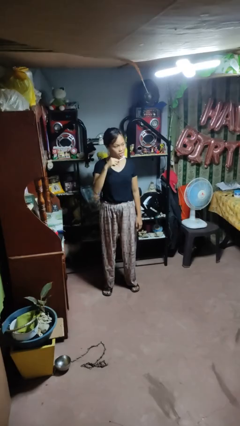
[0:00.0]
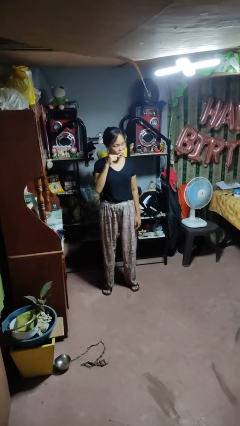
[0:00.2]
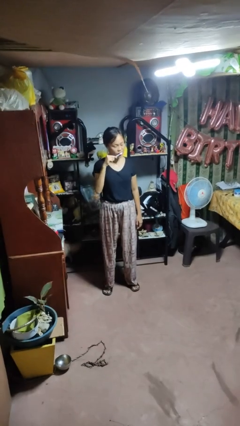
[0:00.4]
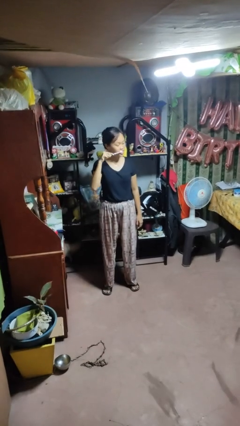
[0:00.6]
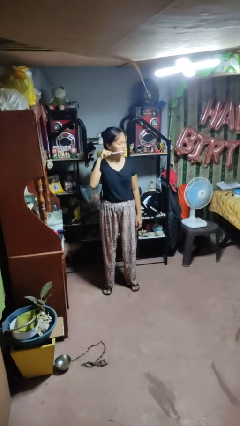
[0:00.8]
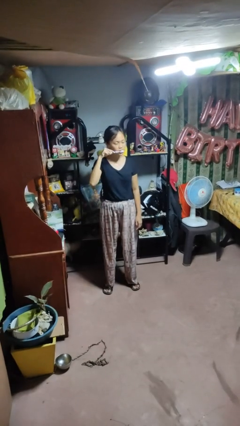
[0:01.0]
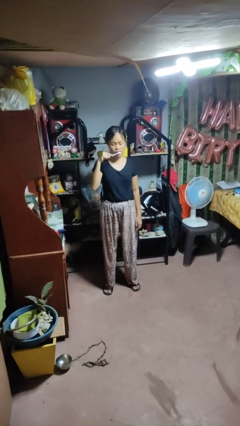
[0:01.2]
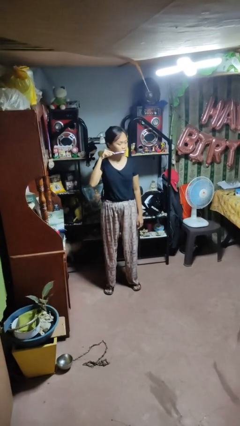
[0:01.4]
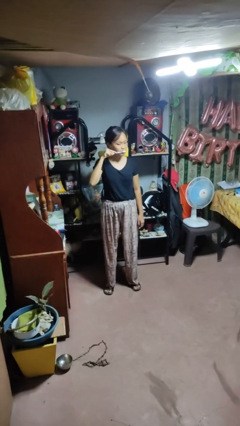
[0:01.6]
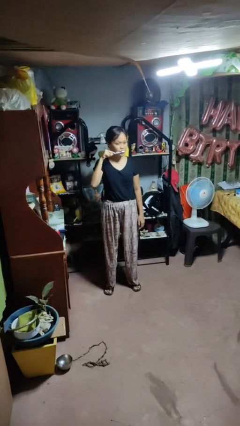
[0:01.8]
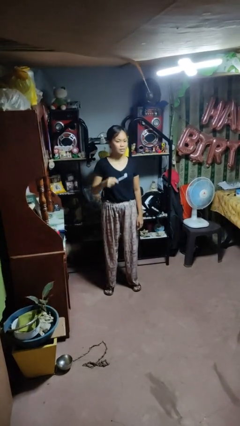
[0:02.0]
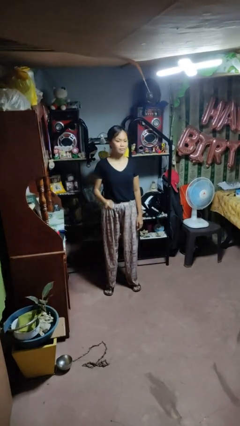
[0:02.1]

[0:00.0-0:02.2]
person brushes teeth

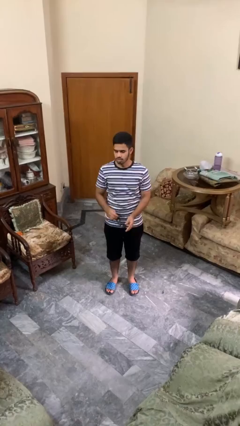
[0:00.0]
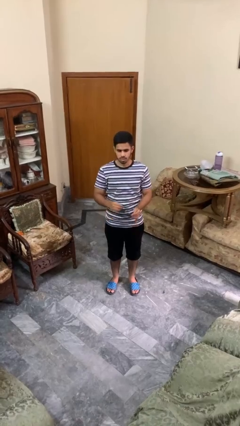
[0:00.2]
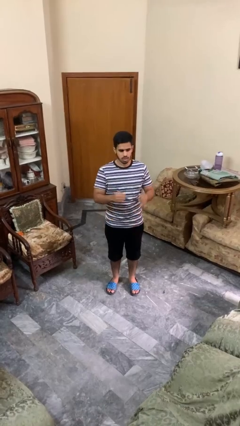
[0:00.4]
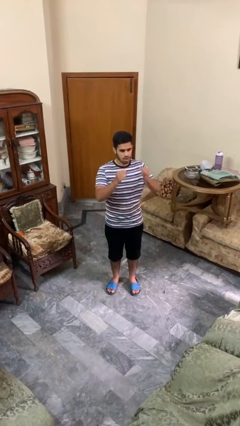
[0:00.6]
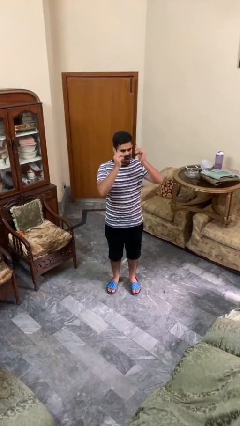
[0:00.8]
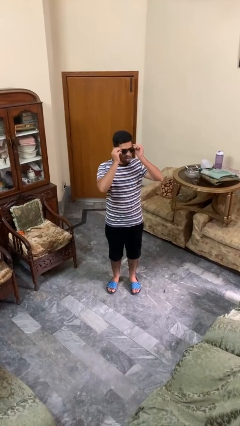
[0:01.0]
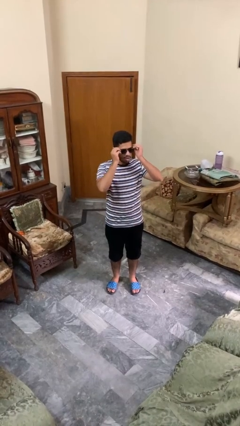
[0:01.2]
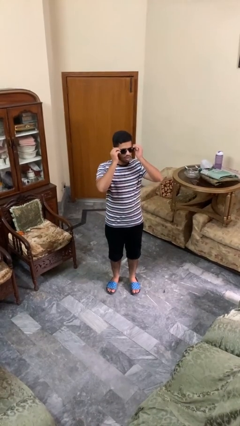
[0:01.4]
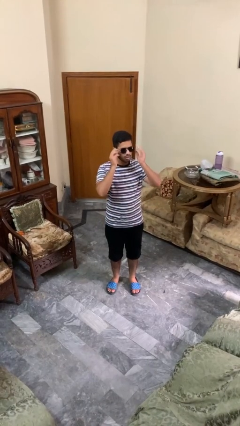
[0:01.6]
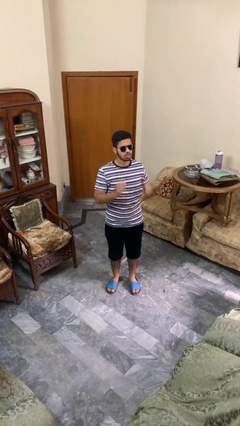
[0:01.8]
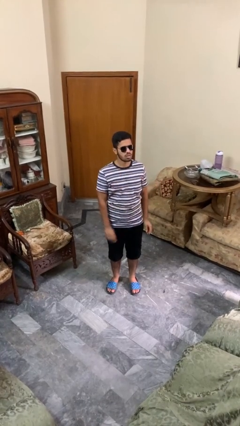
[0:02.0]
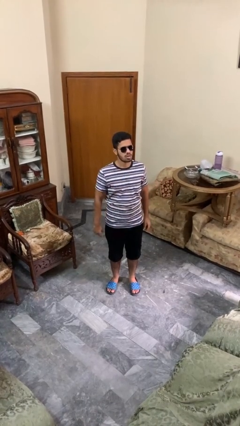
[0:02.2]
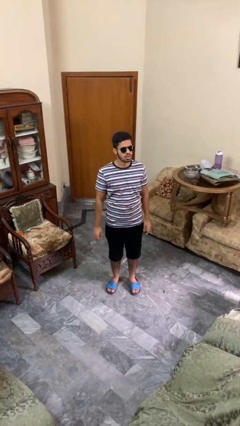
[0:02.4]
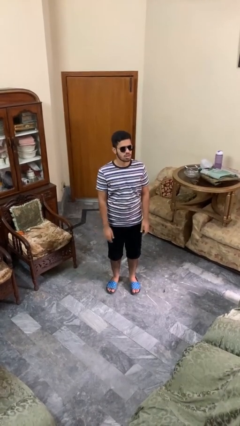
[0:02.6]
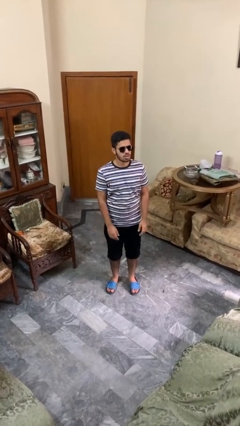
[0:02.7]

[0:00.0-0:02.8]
person puts on sunglasses

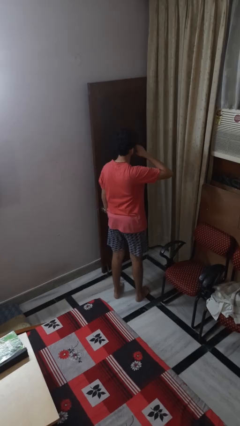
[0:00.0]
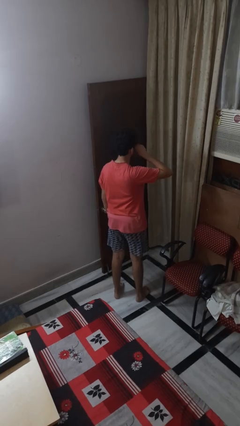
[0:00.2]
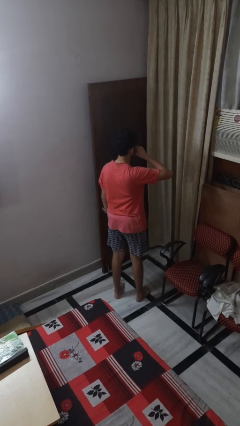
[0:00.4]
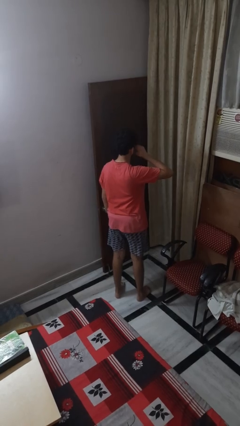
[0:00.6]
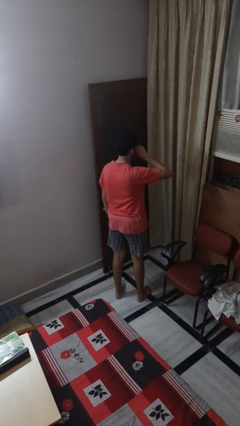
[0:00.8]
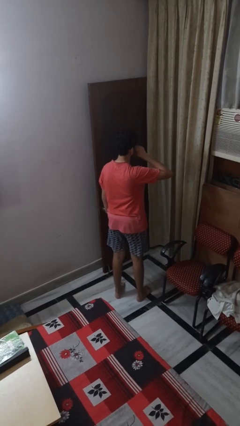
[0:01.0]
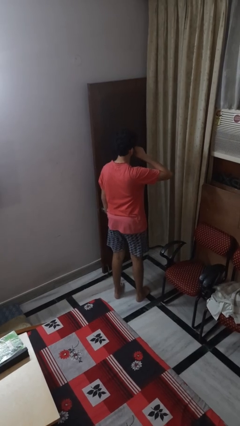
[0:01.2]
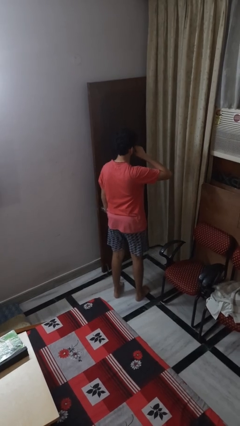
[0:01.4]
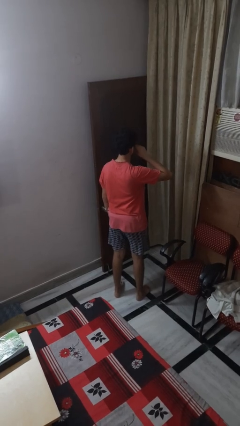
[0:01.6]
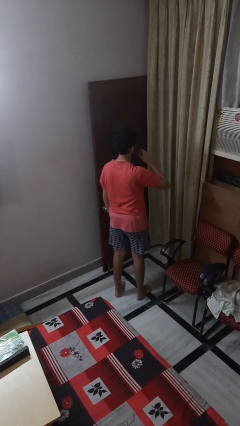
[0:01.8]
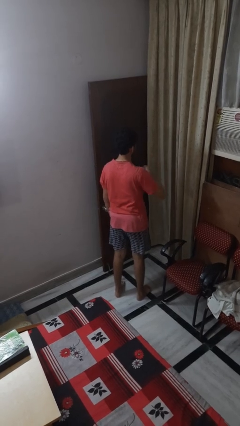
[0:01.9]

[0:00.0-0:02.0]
person rubs eyes

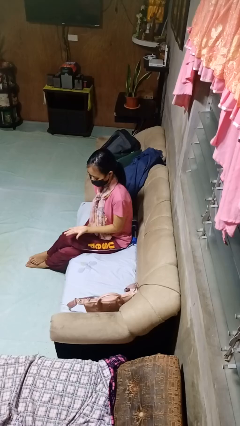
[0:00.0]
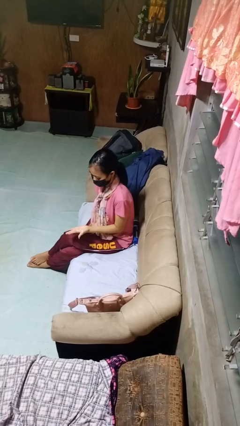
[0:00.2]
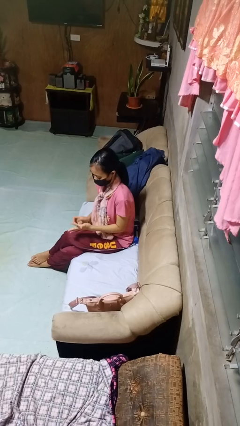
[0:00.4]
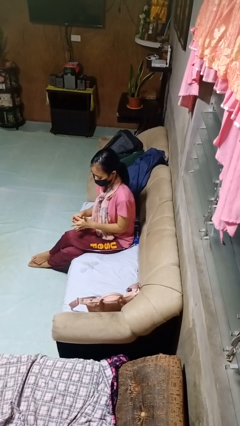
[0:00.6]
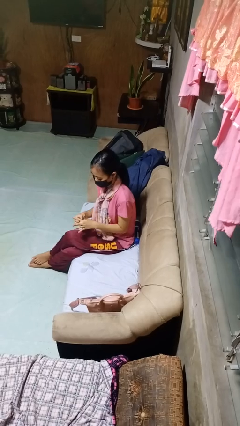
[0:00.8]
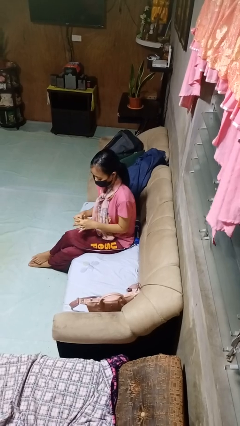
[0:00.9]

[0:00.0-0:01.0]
person takes off ring

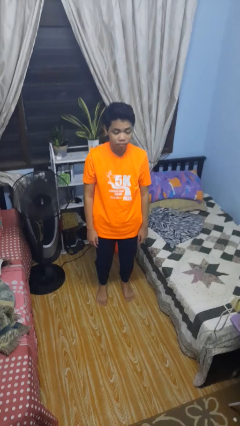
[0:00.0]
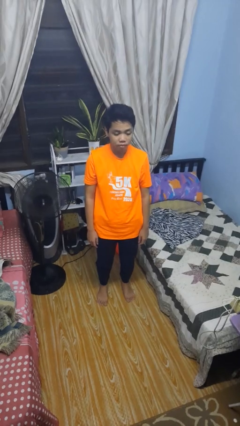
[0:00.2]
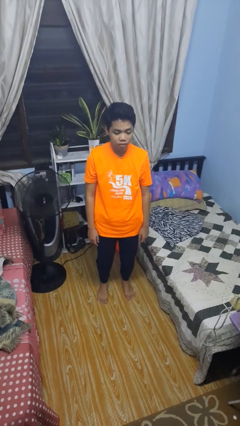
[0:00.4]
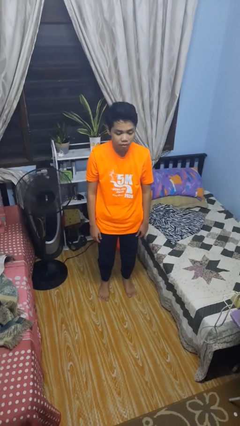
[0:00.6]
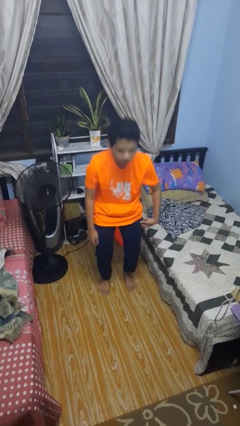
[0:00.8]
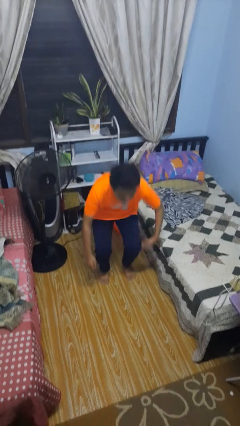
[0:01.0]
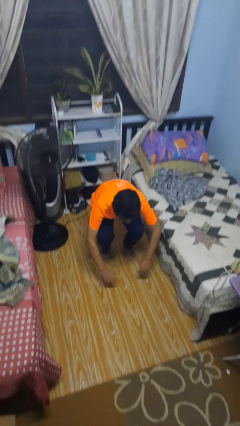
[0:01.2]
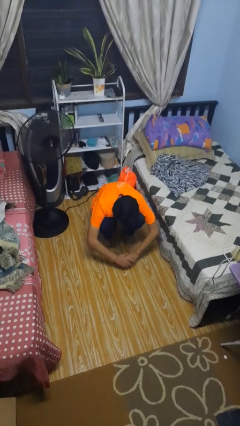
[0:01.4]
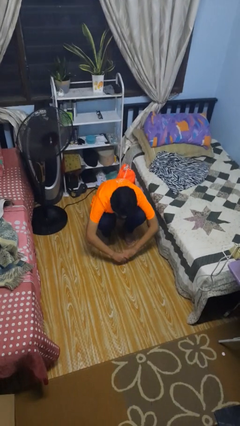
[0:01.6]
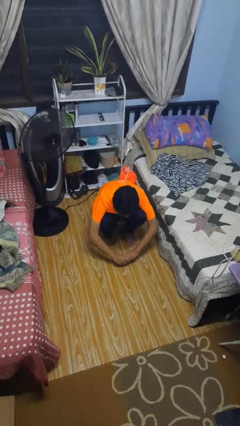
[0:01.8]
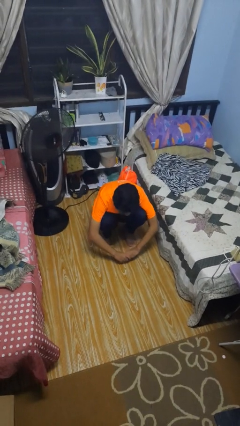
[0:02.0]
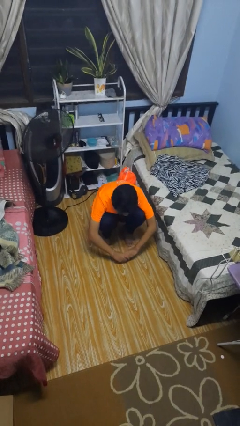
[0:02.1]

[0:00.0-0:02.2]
person squats

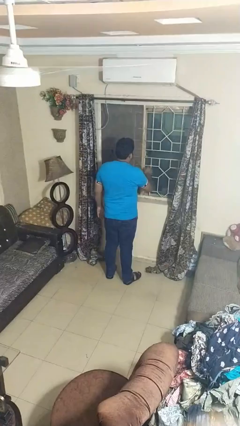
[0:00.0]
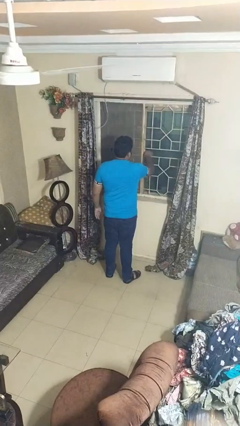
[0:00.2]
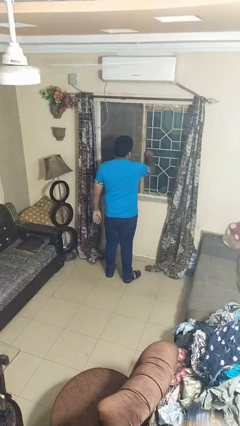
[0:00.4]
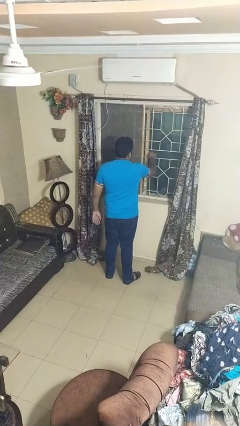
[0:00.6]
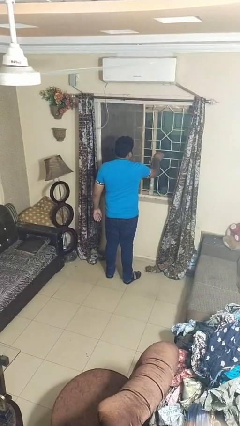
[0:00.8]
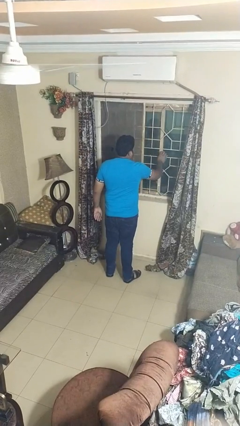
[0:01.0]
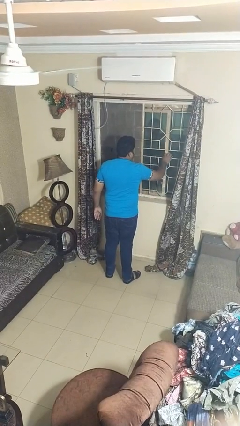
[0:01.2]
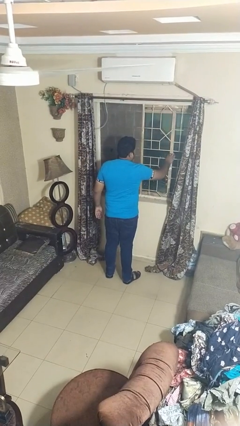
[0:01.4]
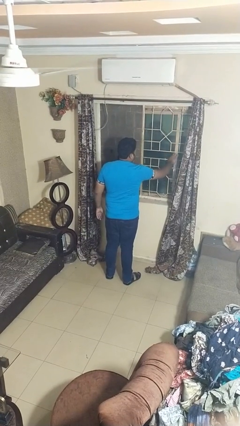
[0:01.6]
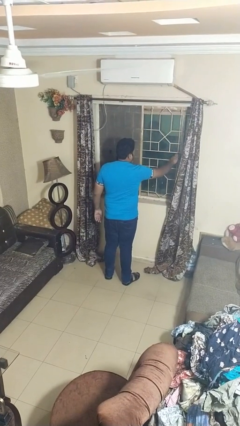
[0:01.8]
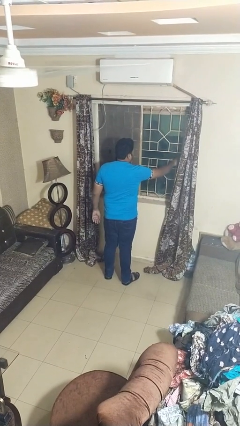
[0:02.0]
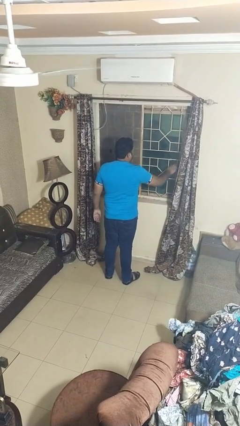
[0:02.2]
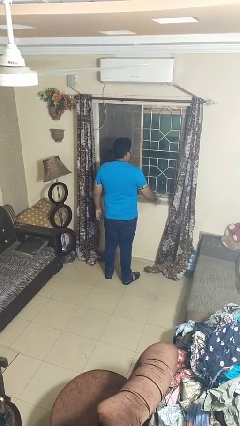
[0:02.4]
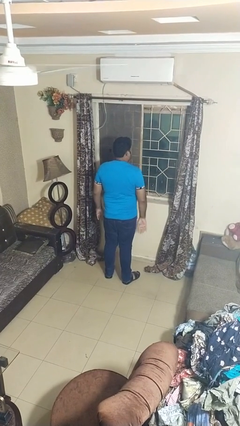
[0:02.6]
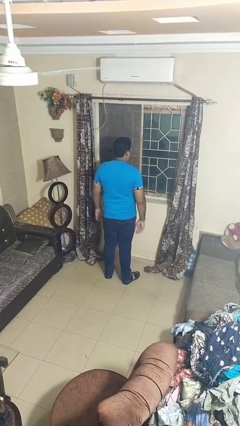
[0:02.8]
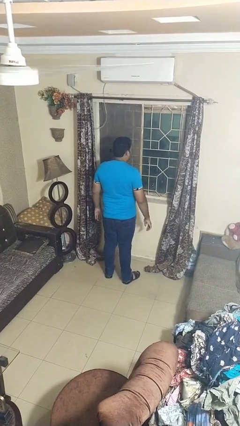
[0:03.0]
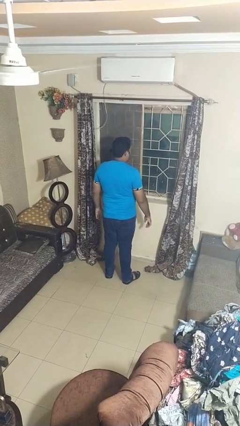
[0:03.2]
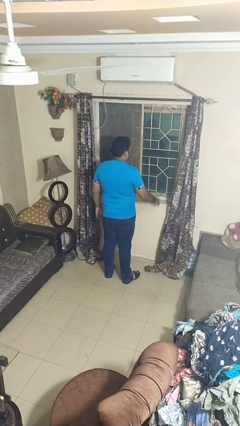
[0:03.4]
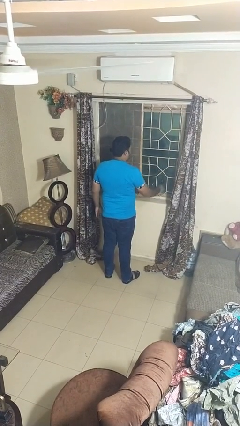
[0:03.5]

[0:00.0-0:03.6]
person opens home window

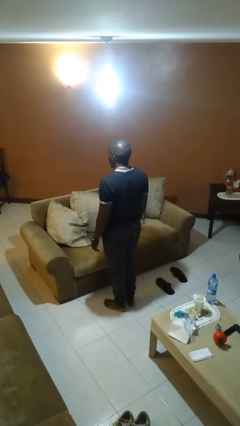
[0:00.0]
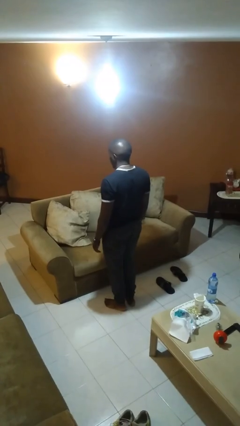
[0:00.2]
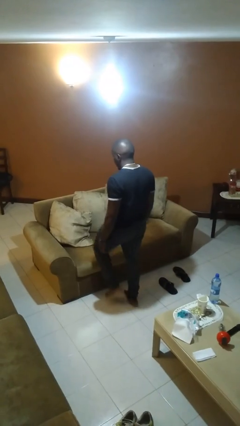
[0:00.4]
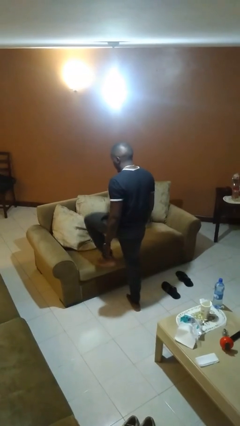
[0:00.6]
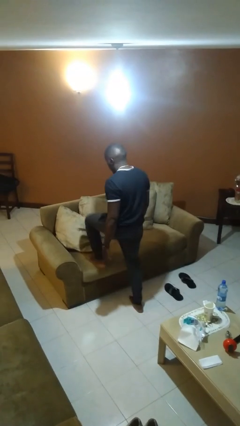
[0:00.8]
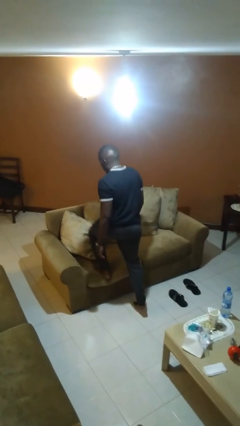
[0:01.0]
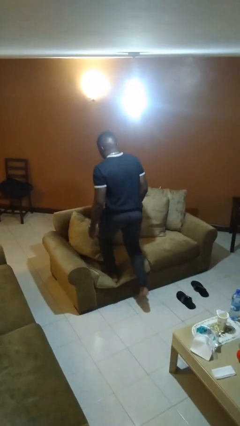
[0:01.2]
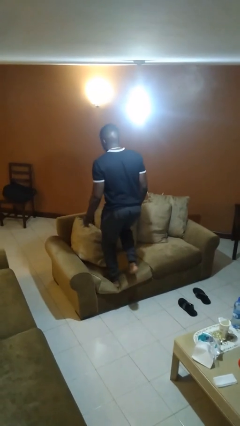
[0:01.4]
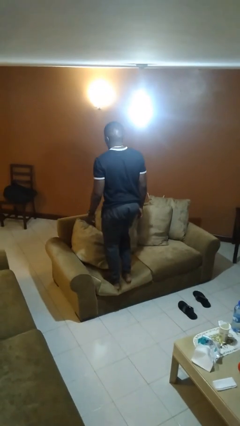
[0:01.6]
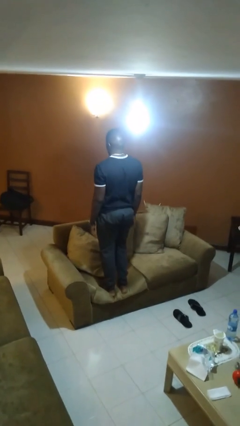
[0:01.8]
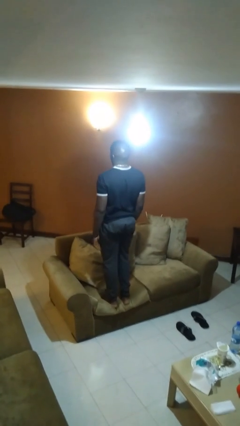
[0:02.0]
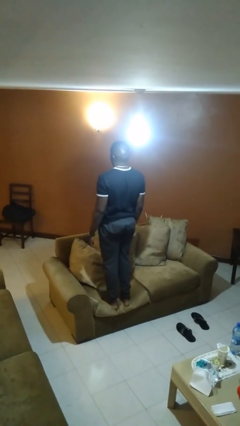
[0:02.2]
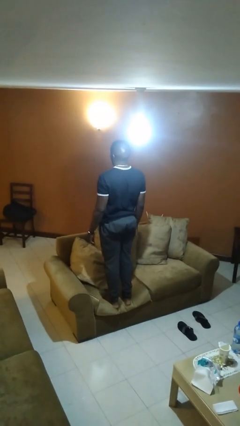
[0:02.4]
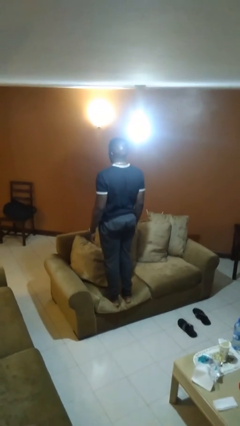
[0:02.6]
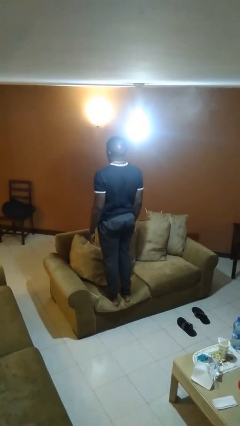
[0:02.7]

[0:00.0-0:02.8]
person climbs on chair

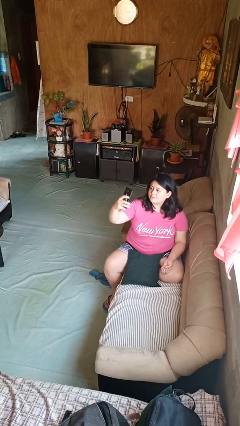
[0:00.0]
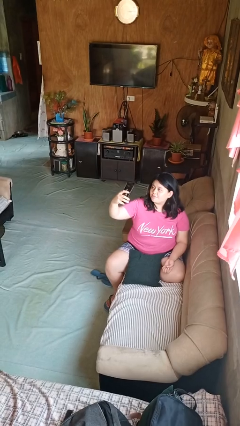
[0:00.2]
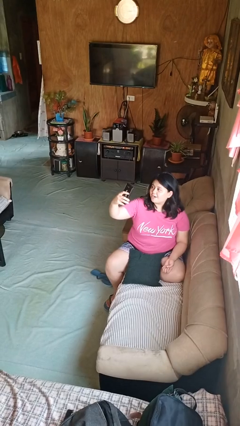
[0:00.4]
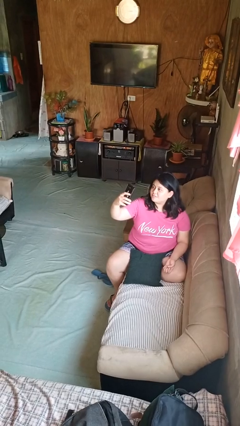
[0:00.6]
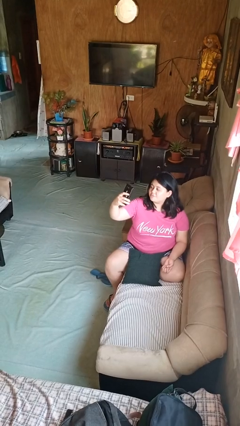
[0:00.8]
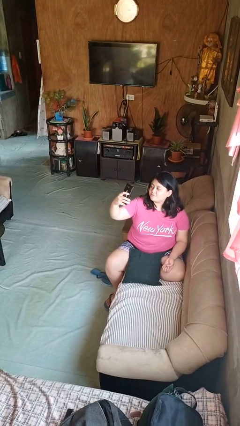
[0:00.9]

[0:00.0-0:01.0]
person takes selfie
